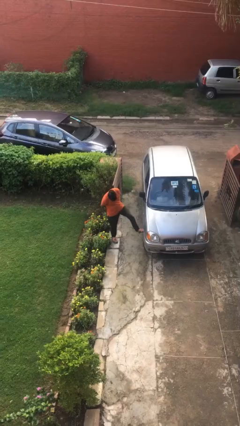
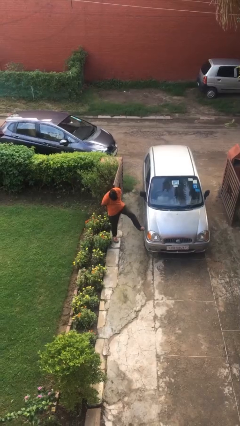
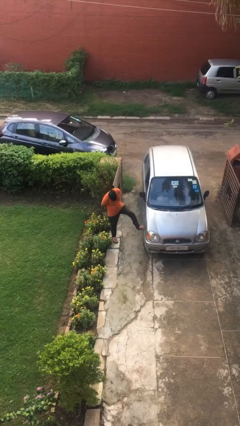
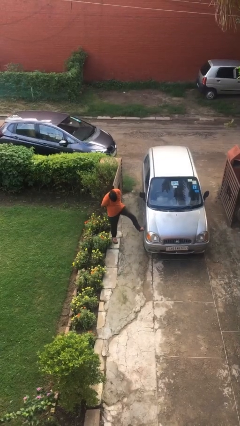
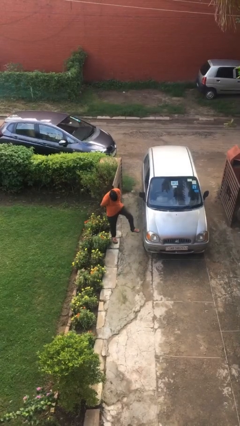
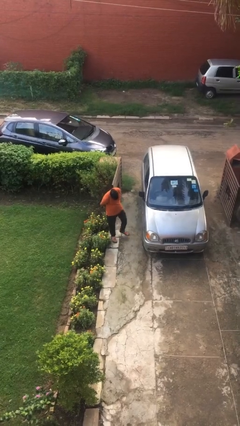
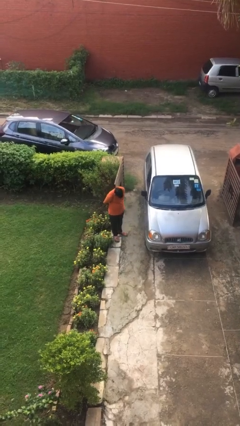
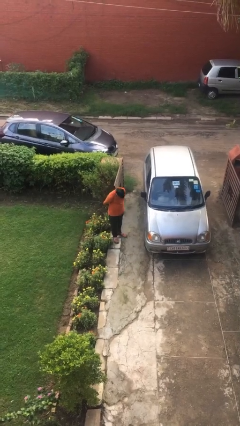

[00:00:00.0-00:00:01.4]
person kicks car tires

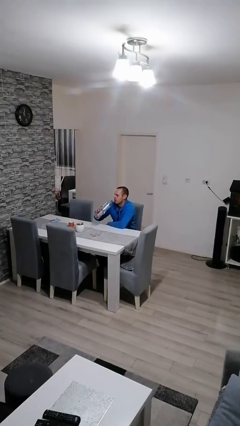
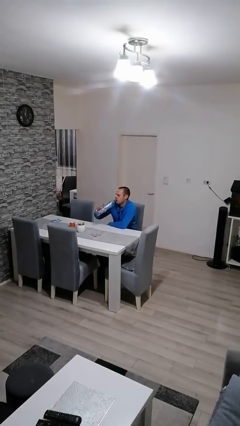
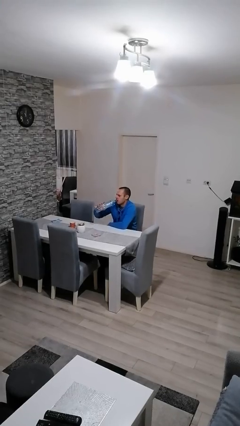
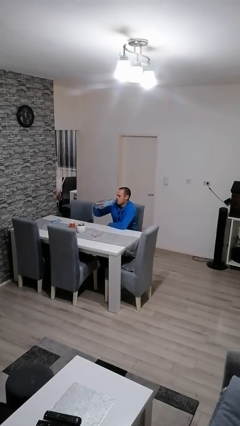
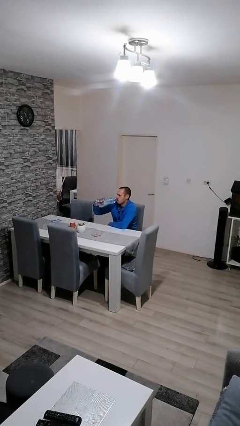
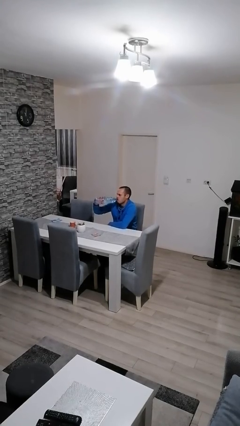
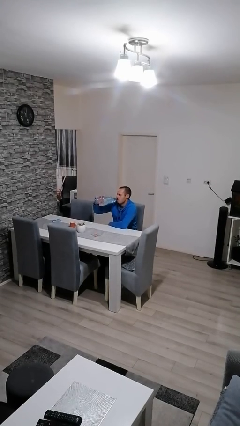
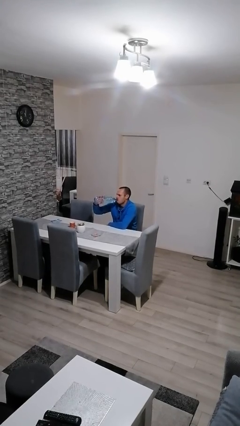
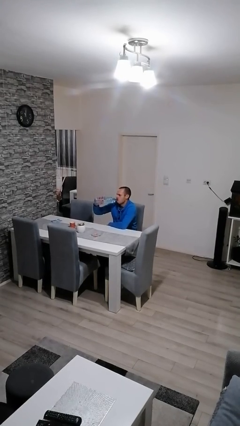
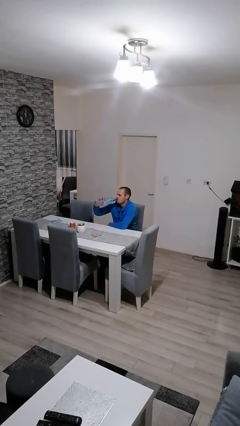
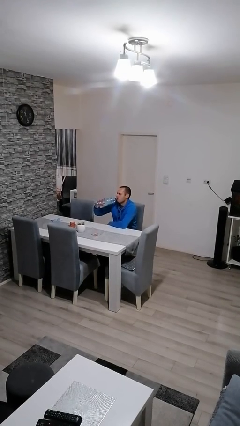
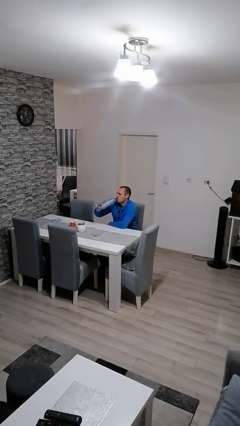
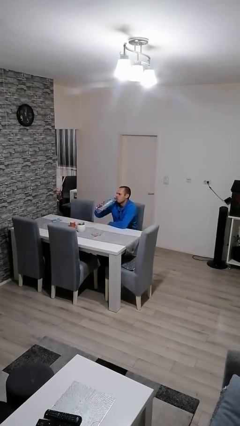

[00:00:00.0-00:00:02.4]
person drinks from bottle

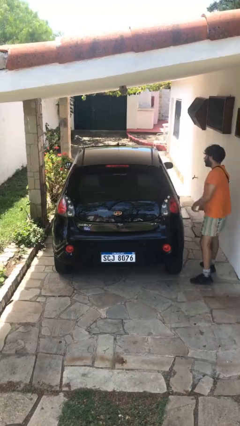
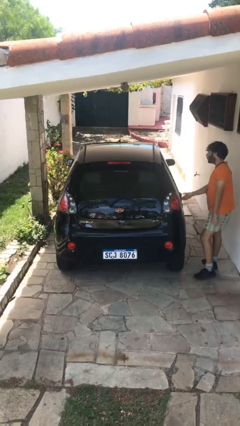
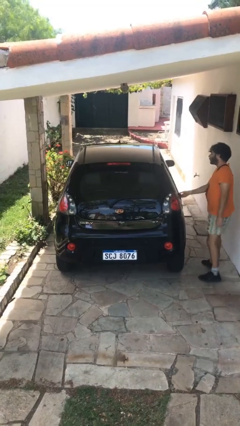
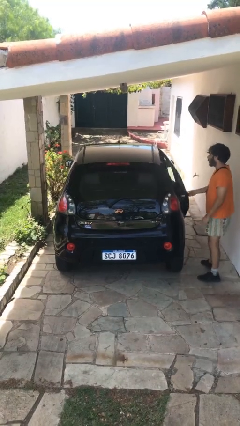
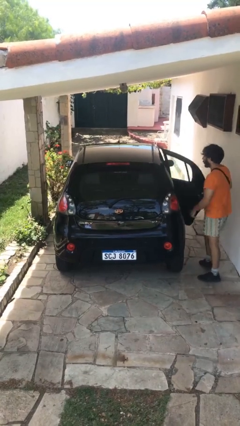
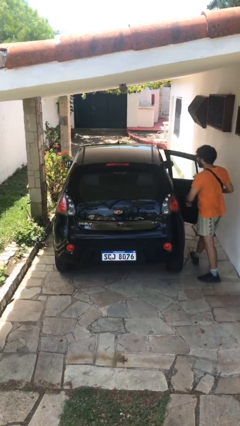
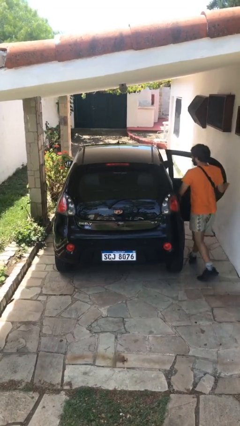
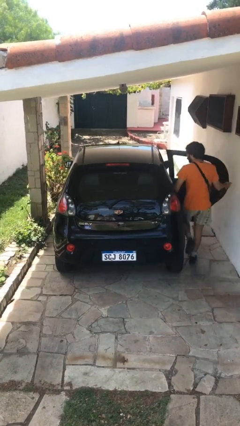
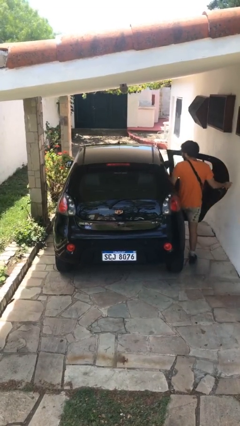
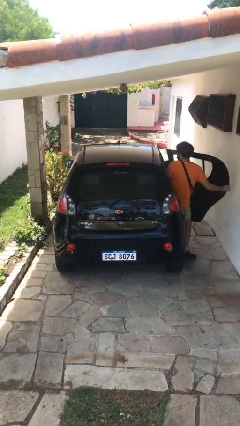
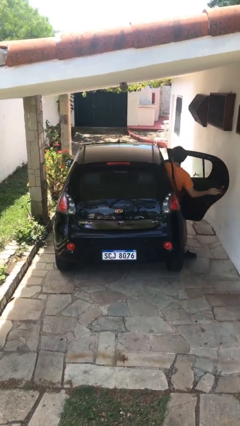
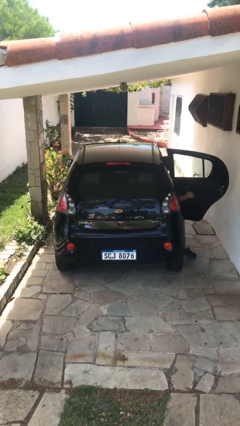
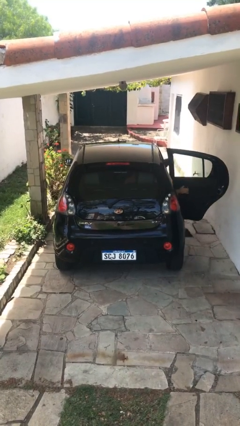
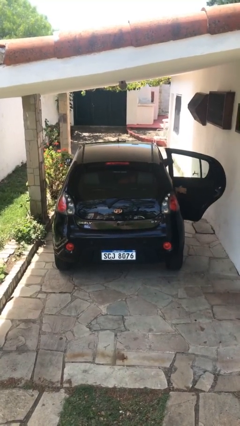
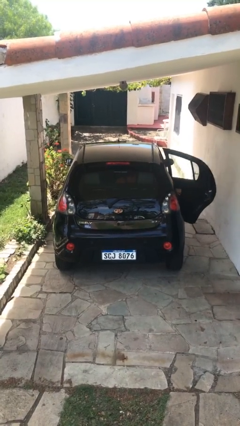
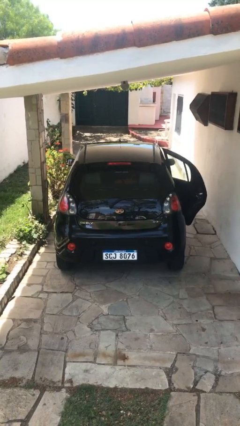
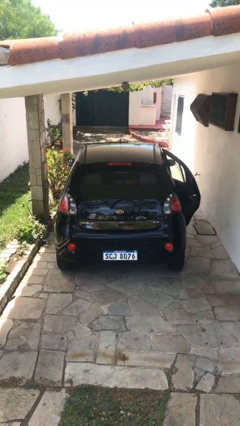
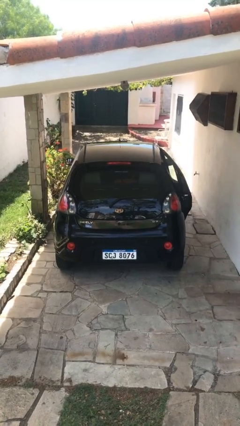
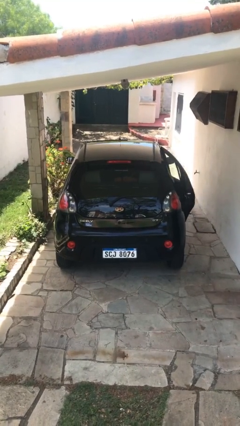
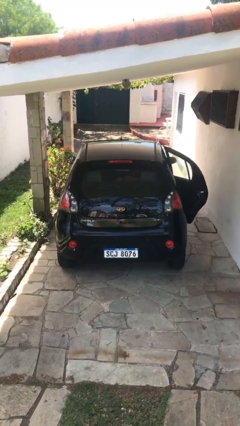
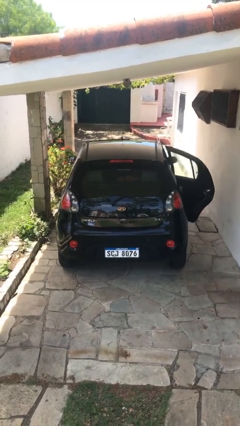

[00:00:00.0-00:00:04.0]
car picks up person

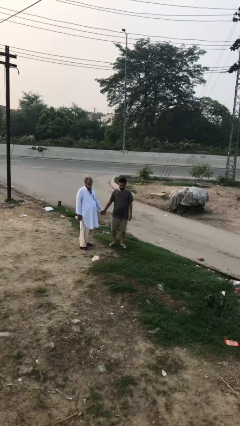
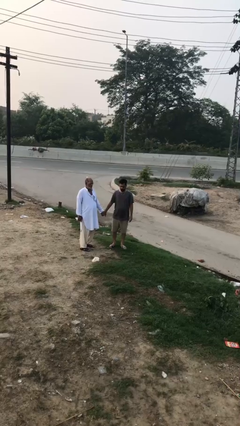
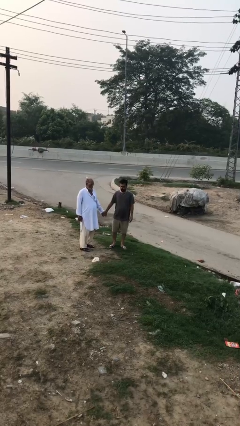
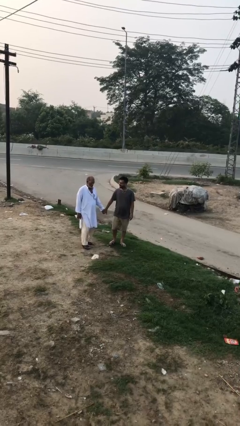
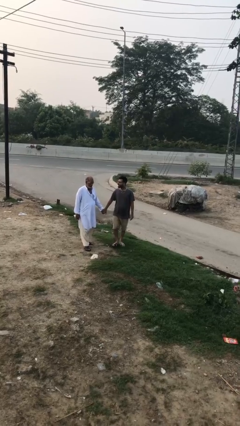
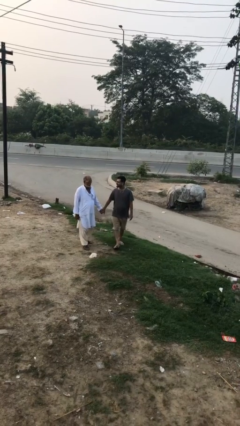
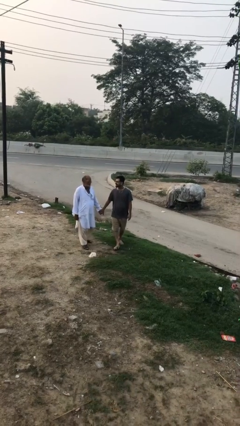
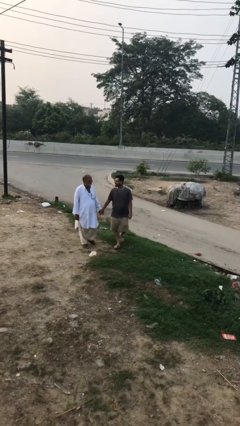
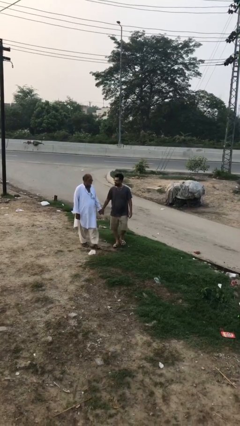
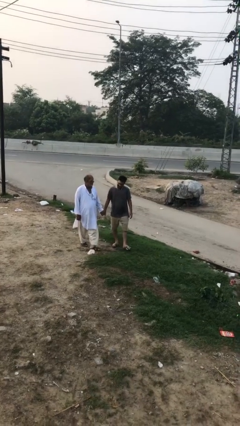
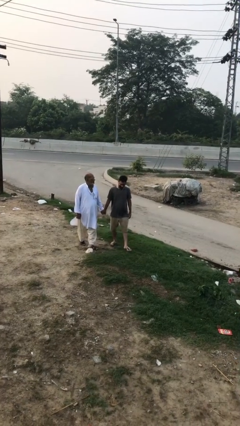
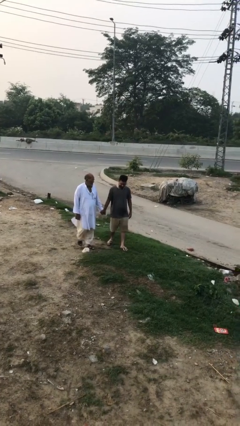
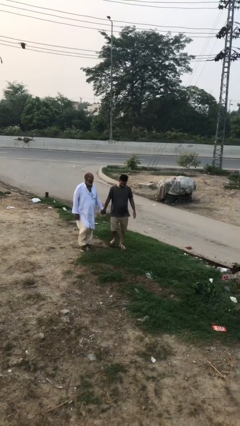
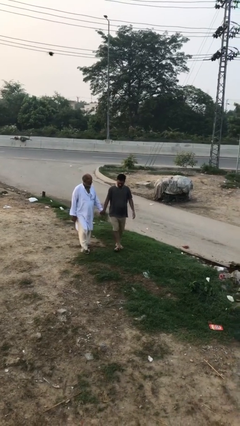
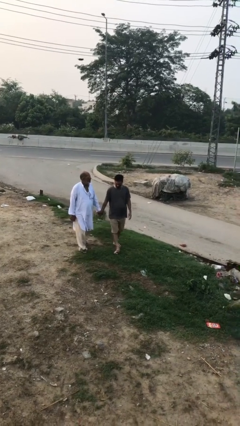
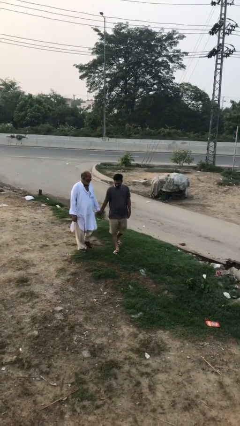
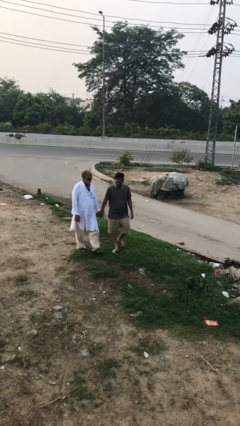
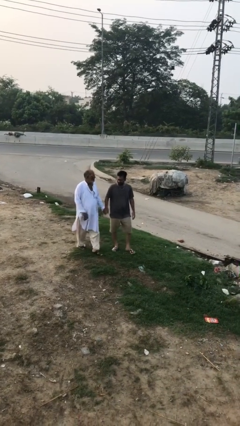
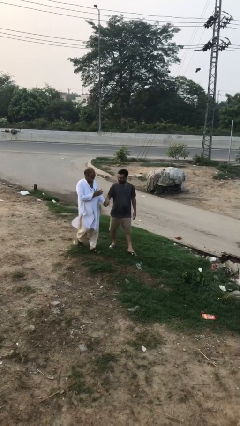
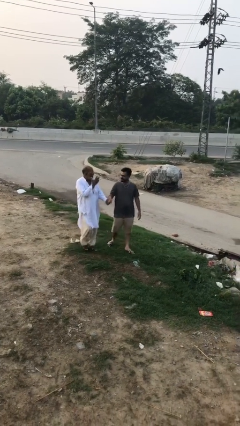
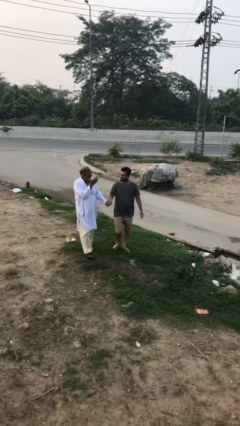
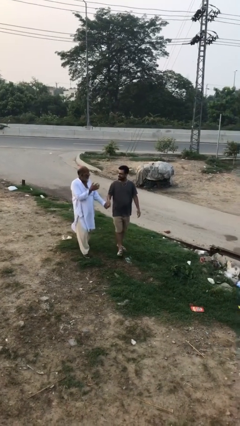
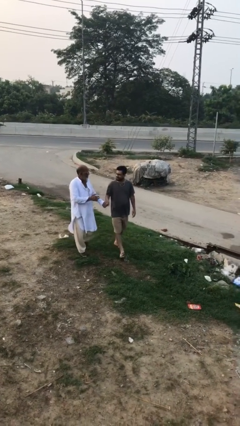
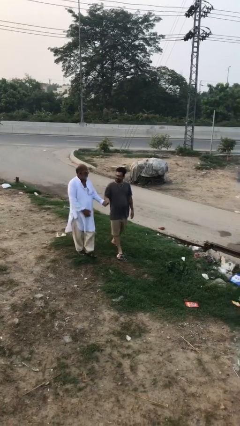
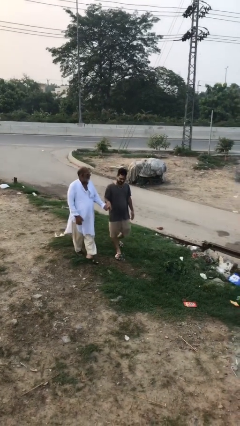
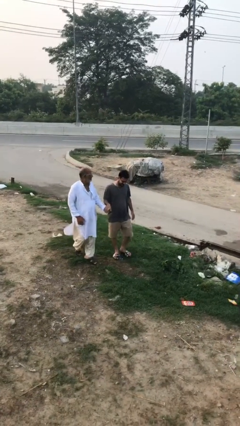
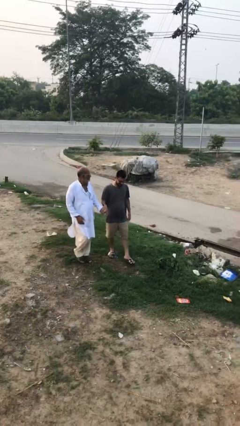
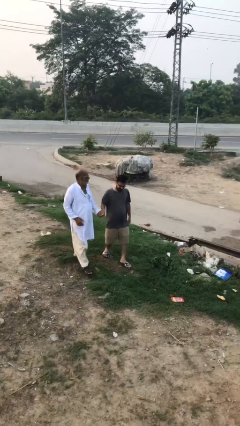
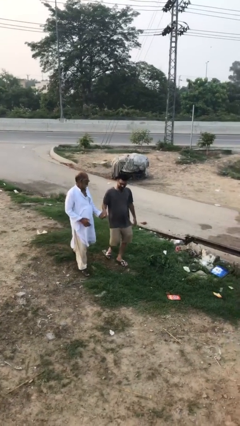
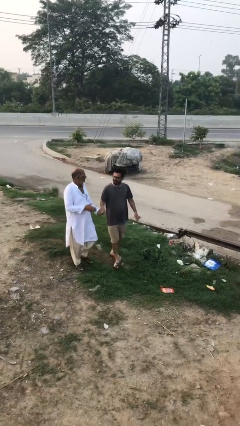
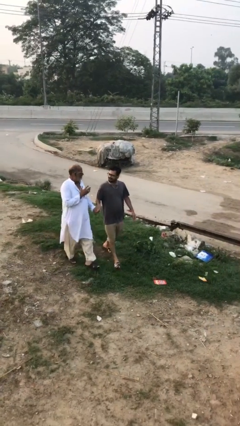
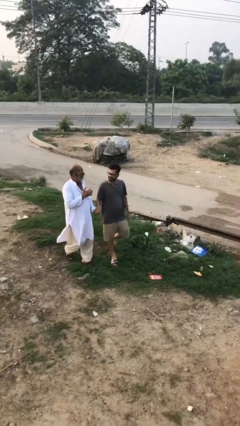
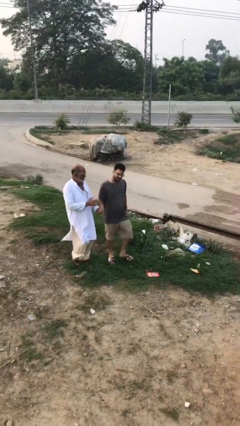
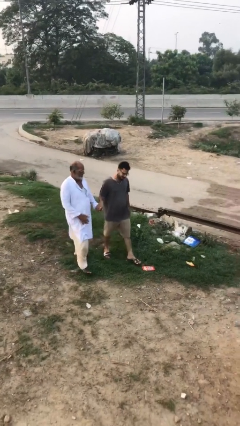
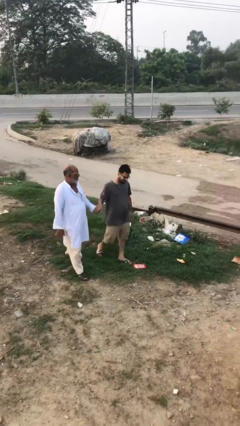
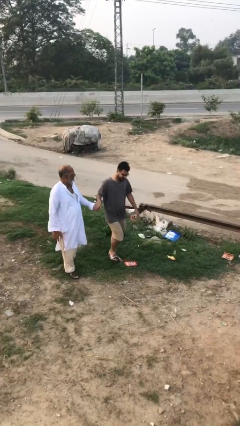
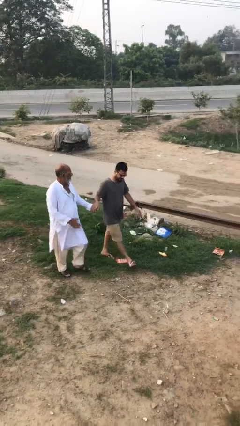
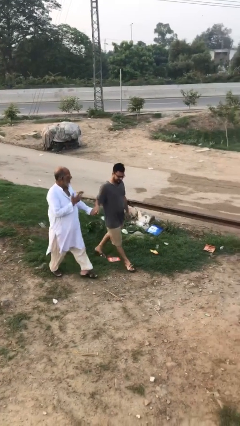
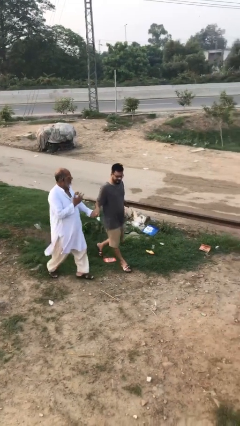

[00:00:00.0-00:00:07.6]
person holds hand

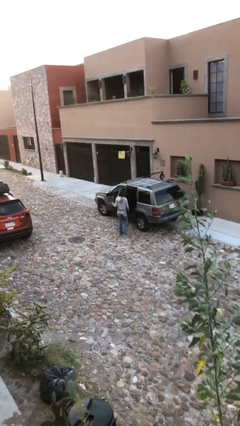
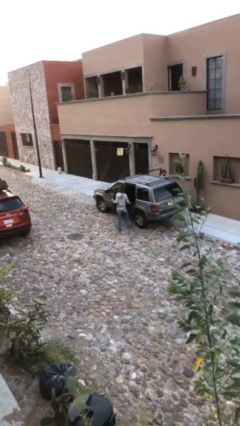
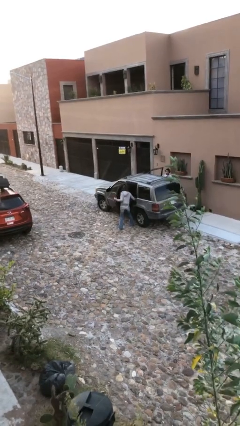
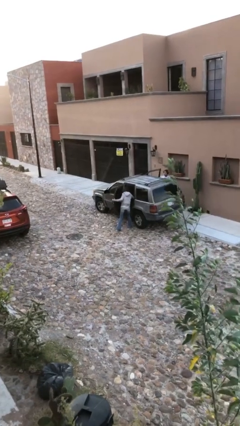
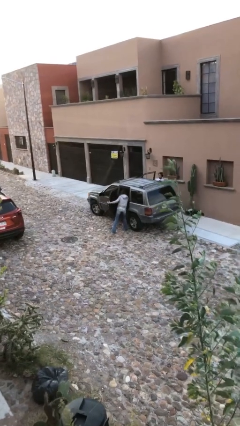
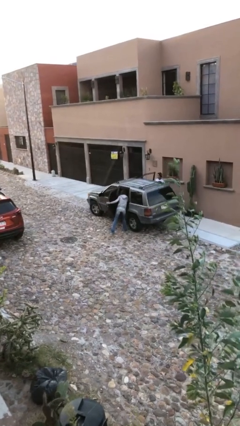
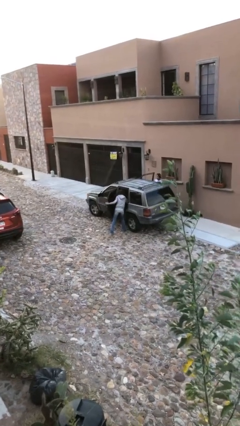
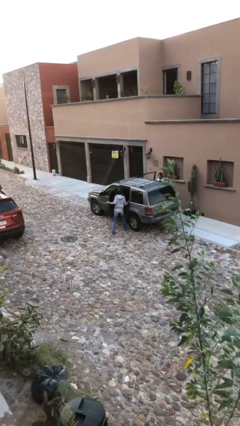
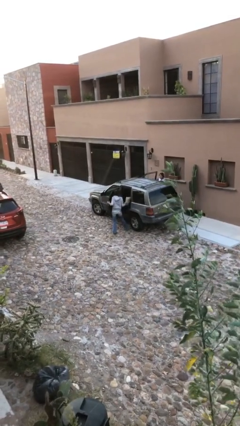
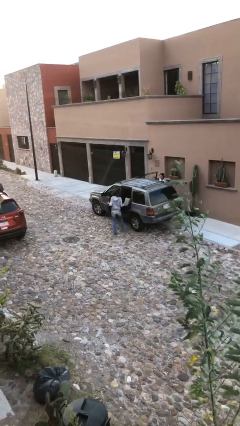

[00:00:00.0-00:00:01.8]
person unloads car
